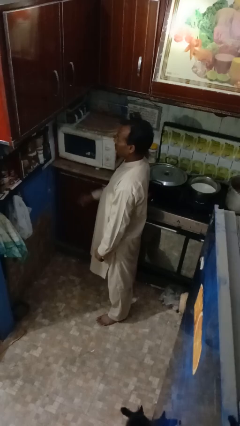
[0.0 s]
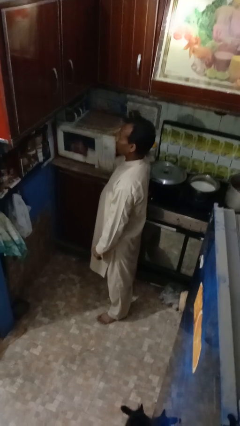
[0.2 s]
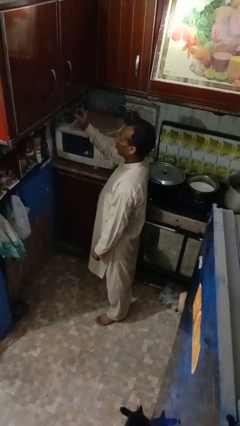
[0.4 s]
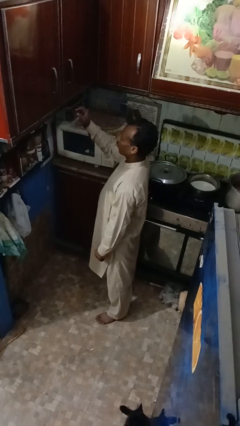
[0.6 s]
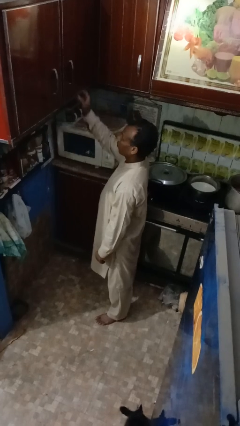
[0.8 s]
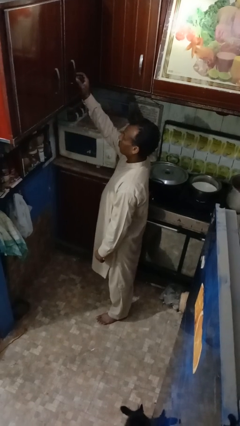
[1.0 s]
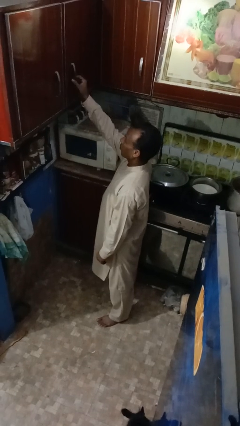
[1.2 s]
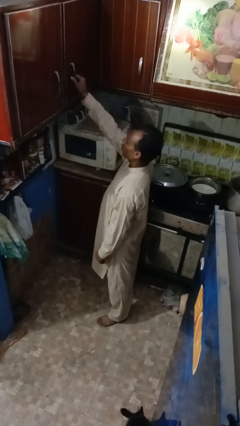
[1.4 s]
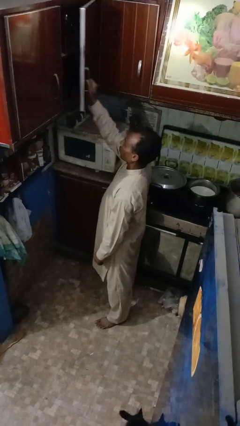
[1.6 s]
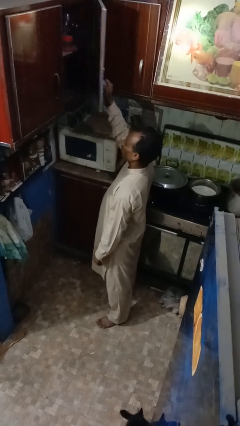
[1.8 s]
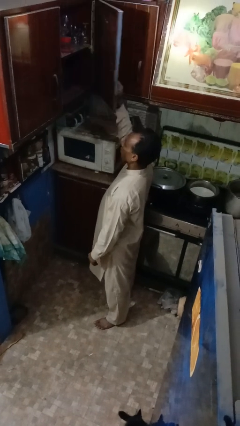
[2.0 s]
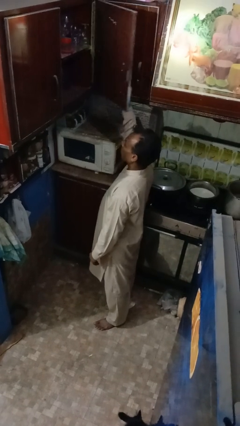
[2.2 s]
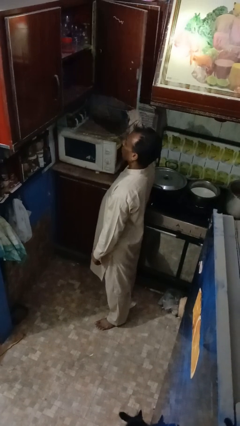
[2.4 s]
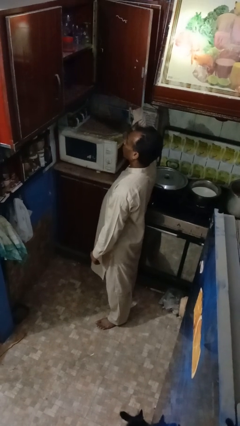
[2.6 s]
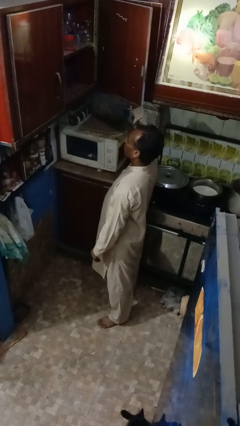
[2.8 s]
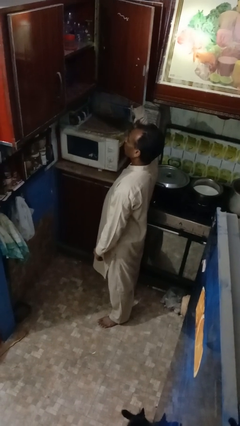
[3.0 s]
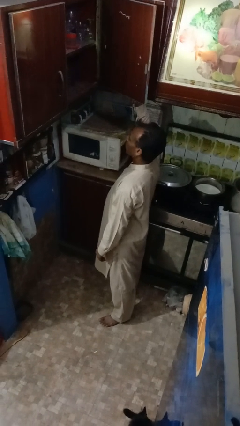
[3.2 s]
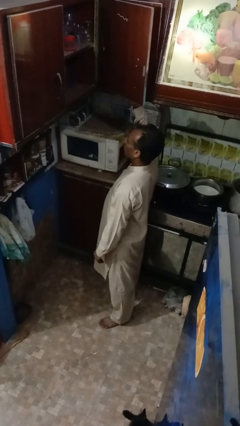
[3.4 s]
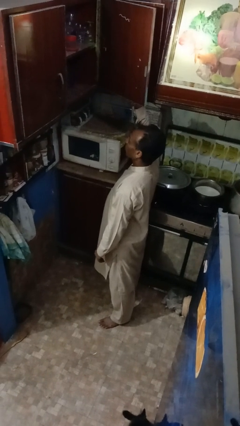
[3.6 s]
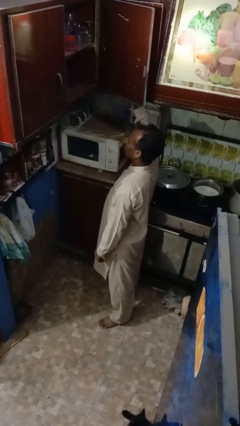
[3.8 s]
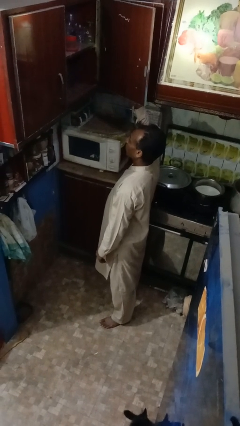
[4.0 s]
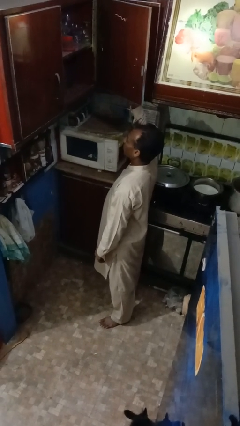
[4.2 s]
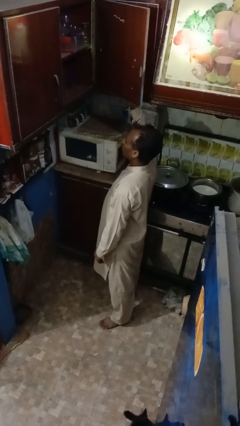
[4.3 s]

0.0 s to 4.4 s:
person opens cabinet

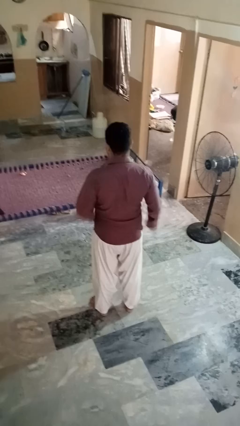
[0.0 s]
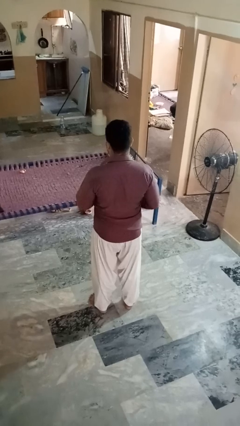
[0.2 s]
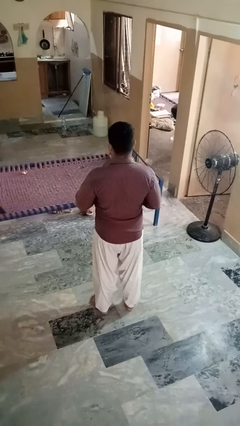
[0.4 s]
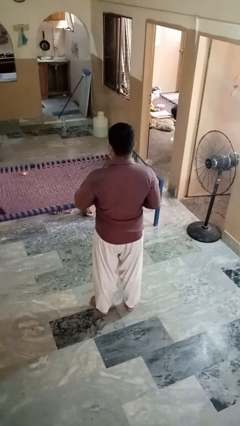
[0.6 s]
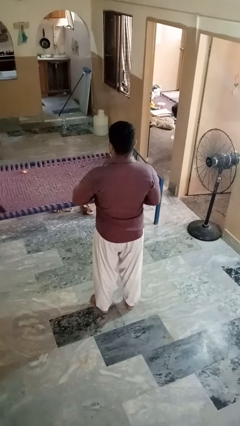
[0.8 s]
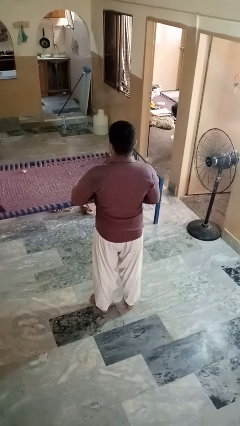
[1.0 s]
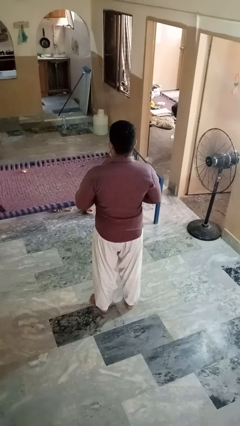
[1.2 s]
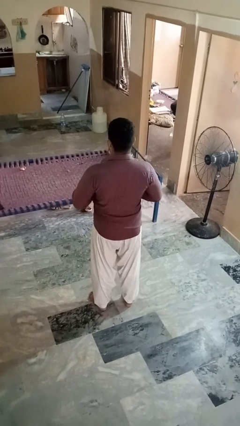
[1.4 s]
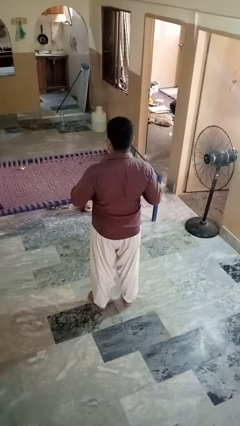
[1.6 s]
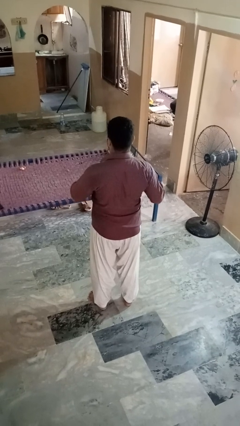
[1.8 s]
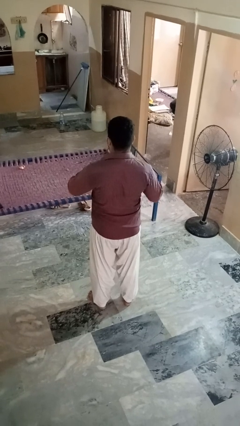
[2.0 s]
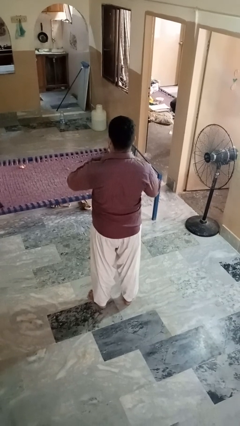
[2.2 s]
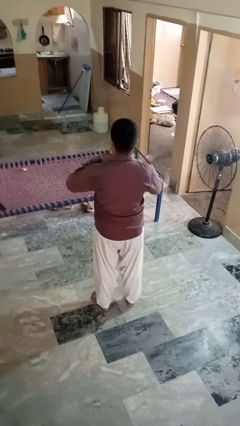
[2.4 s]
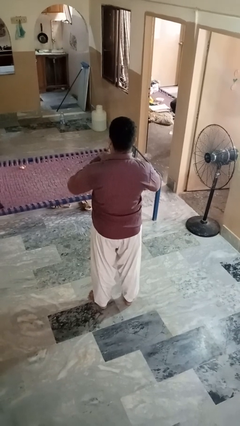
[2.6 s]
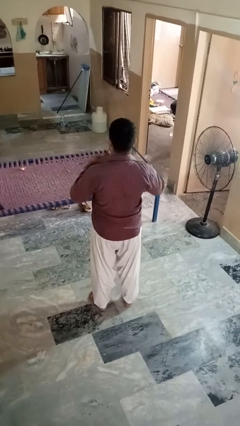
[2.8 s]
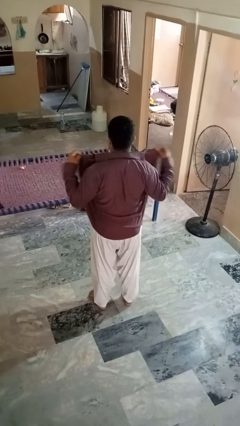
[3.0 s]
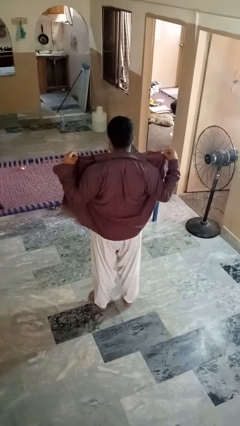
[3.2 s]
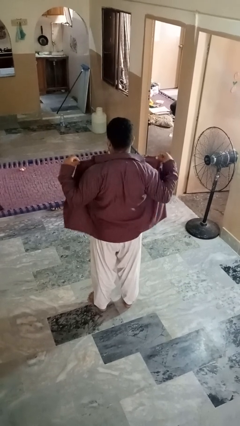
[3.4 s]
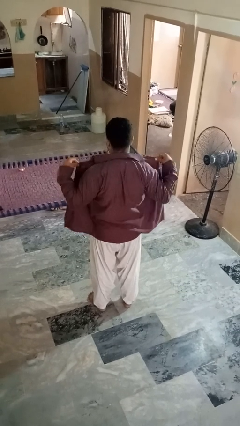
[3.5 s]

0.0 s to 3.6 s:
person unbuttons shirt

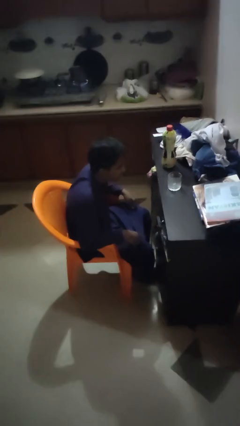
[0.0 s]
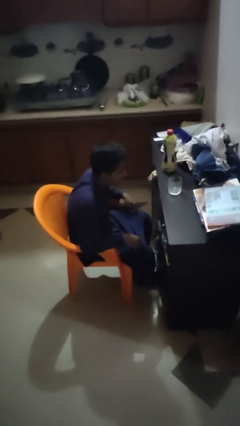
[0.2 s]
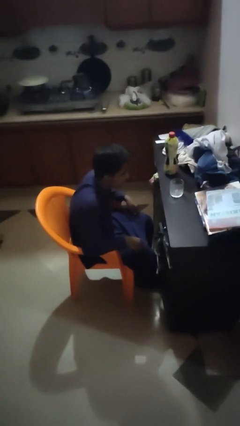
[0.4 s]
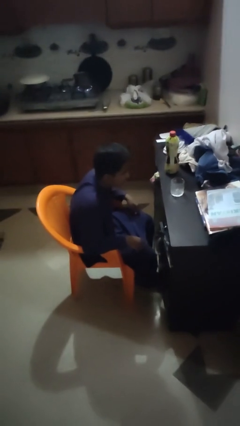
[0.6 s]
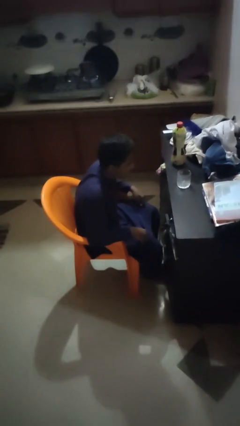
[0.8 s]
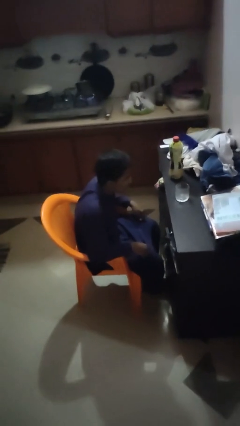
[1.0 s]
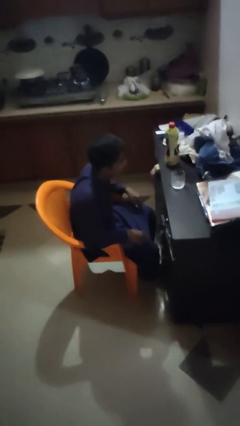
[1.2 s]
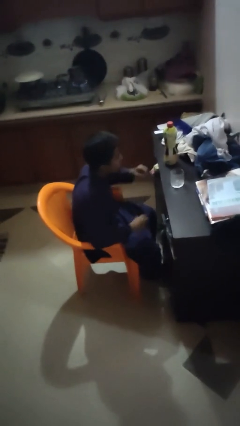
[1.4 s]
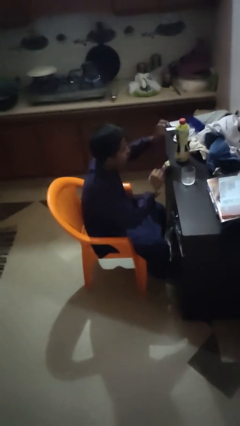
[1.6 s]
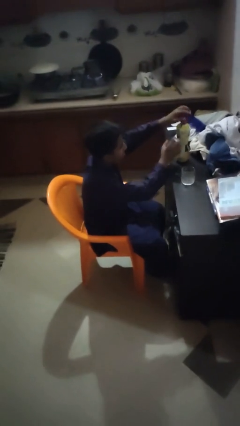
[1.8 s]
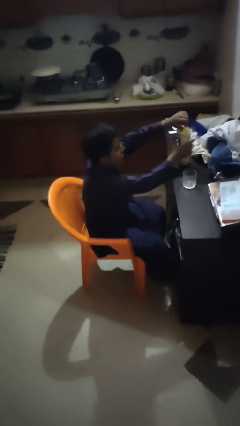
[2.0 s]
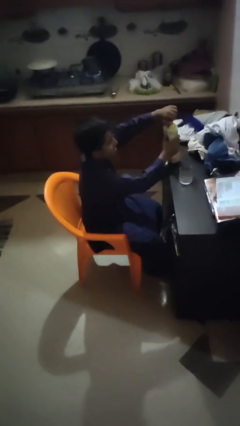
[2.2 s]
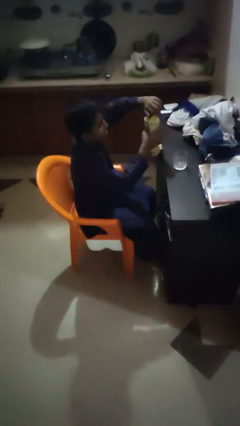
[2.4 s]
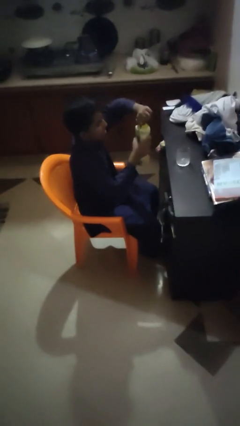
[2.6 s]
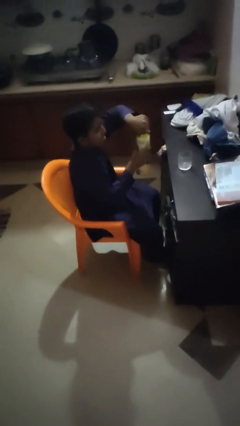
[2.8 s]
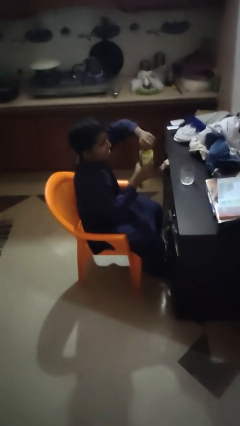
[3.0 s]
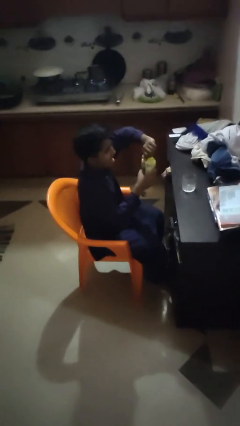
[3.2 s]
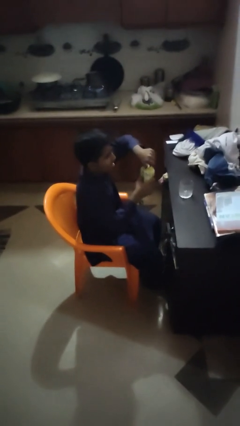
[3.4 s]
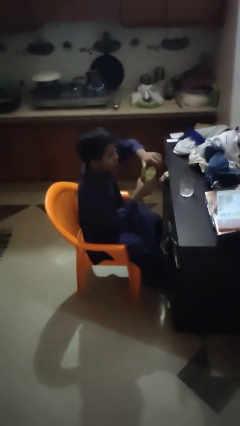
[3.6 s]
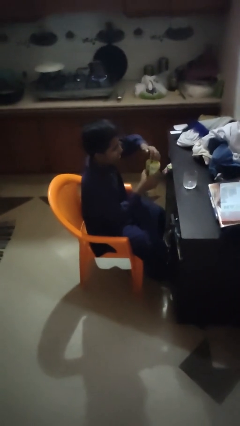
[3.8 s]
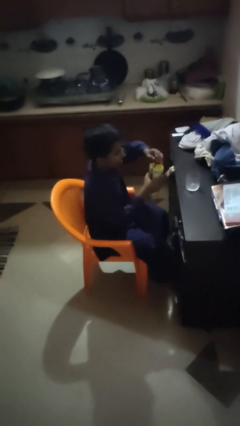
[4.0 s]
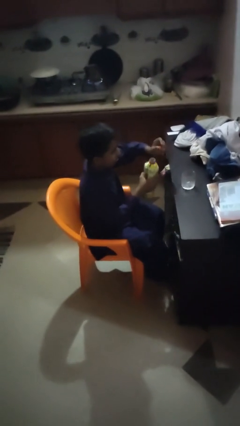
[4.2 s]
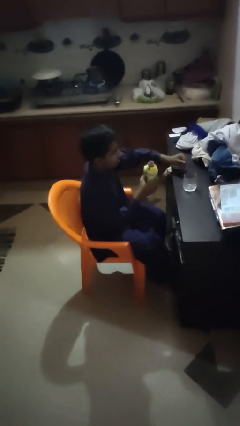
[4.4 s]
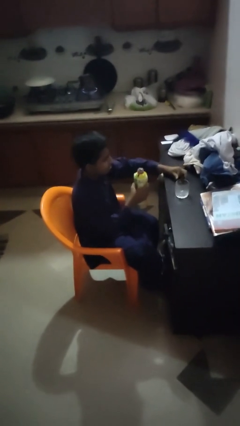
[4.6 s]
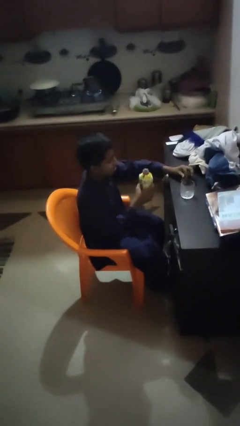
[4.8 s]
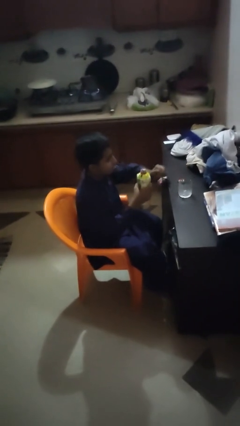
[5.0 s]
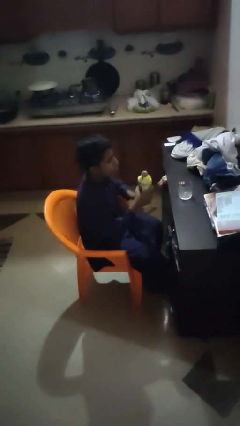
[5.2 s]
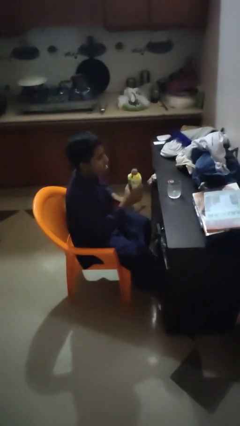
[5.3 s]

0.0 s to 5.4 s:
person unscrews lid from bottle

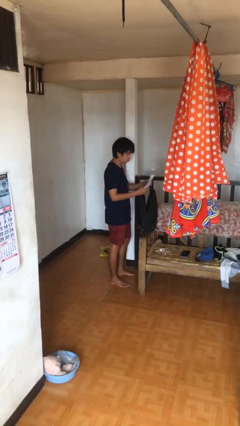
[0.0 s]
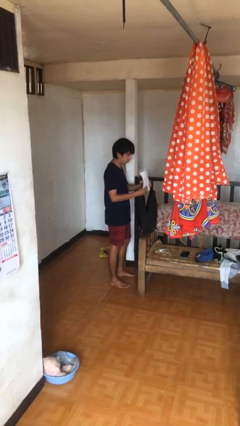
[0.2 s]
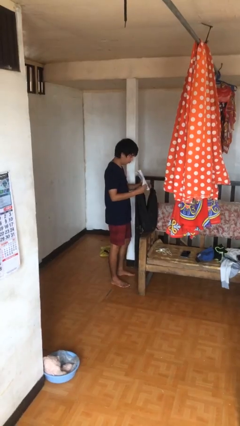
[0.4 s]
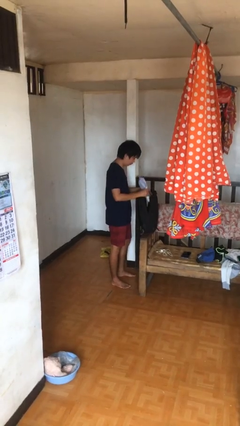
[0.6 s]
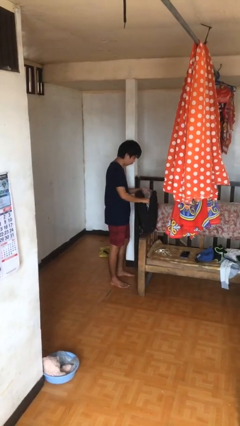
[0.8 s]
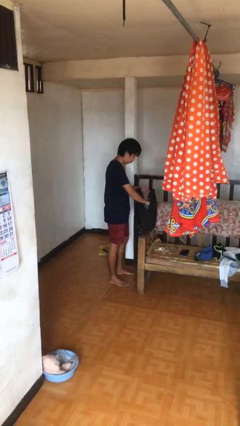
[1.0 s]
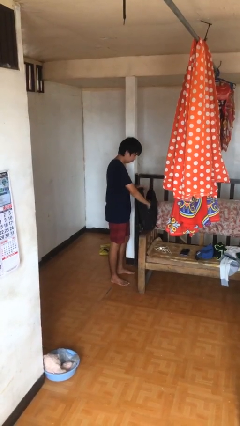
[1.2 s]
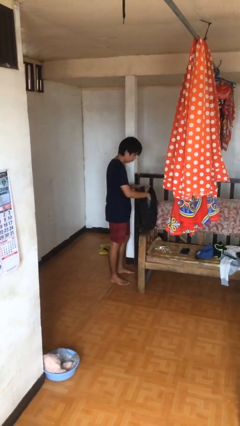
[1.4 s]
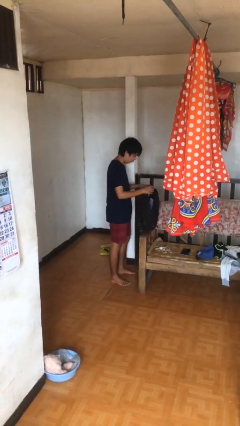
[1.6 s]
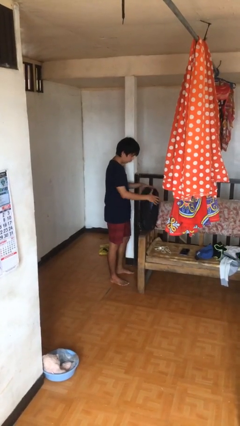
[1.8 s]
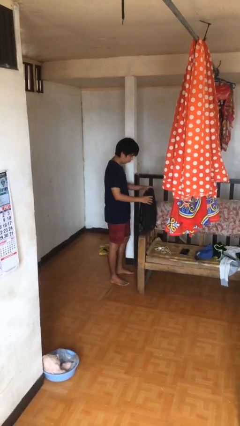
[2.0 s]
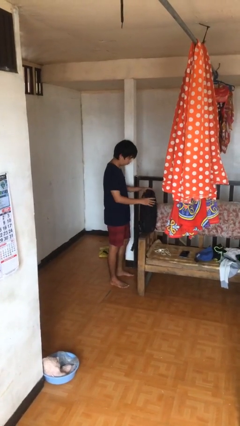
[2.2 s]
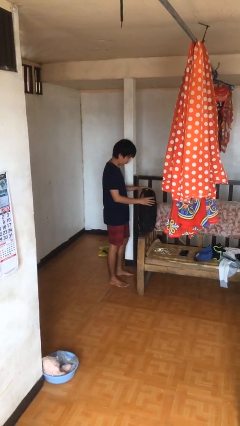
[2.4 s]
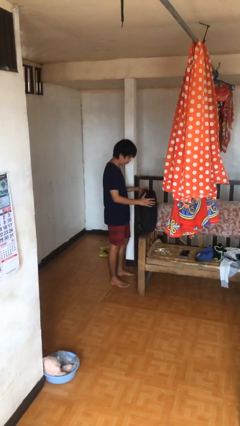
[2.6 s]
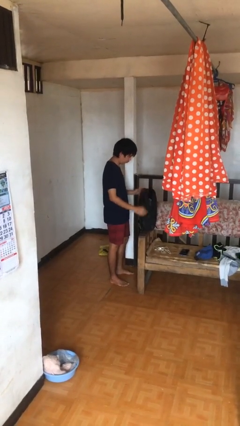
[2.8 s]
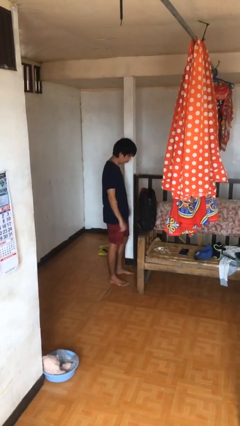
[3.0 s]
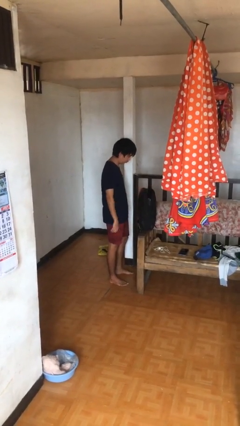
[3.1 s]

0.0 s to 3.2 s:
person puts object into backpack

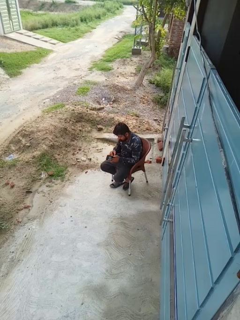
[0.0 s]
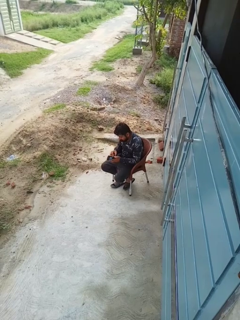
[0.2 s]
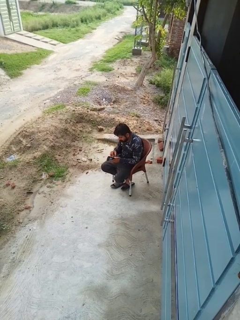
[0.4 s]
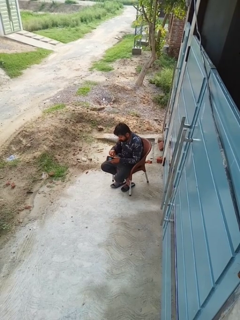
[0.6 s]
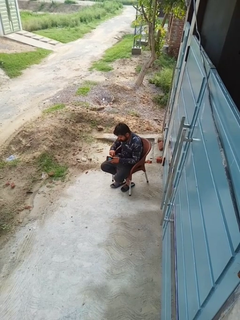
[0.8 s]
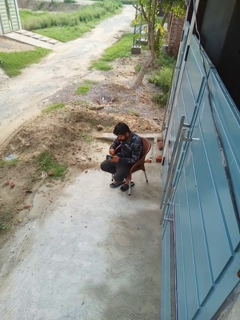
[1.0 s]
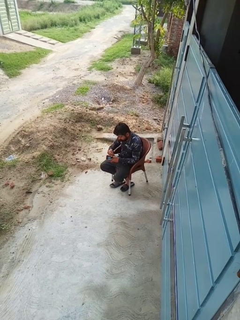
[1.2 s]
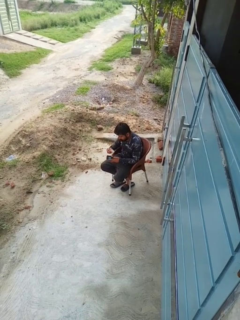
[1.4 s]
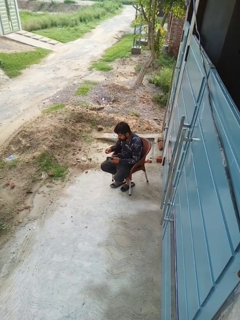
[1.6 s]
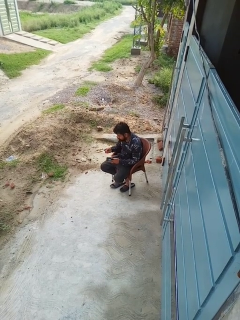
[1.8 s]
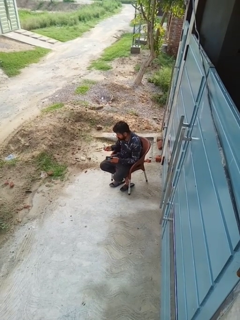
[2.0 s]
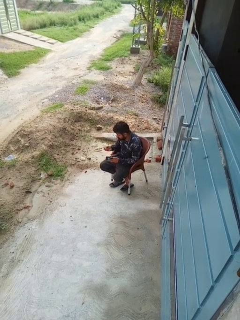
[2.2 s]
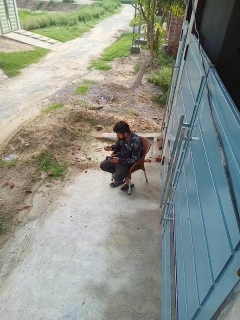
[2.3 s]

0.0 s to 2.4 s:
person takes object from purse
